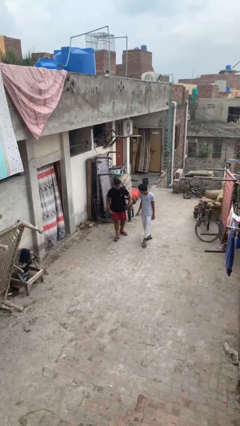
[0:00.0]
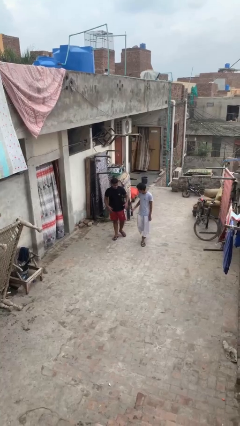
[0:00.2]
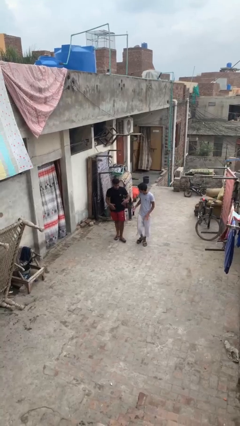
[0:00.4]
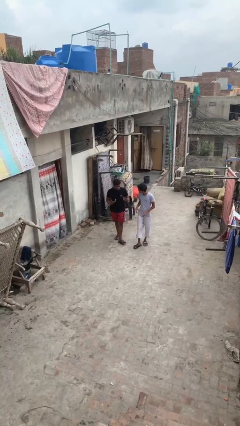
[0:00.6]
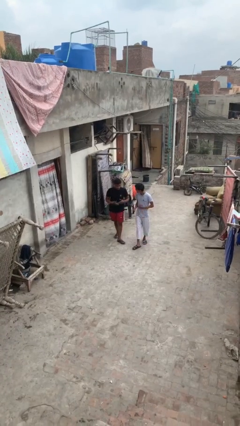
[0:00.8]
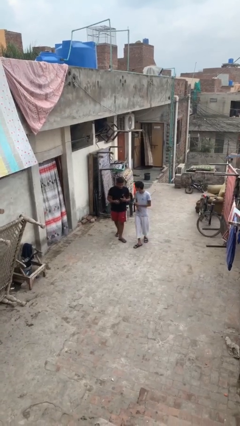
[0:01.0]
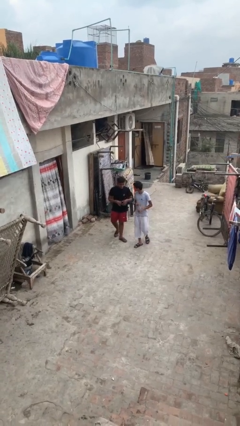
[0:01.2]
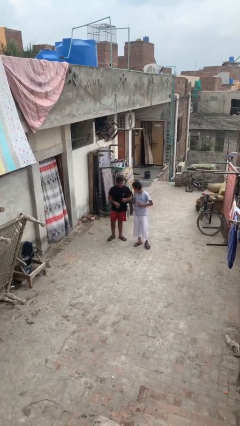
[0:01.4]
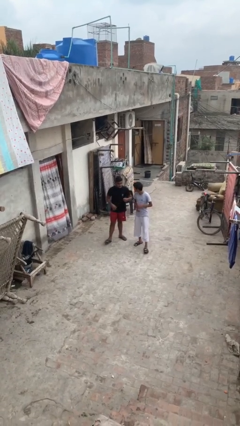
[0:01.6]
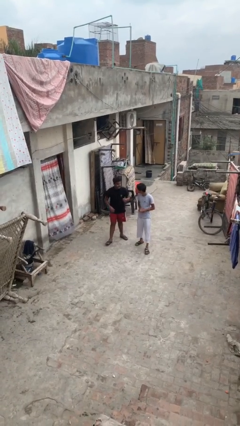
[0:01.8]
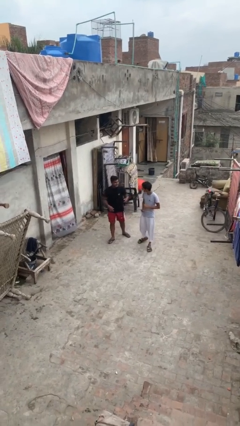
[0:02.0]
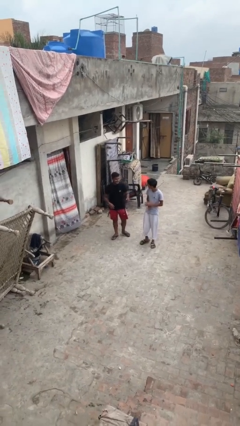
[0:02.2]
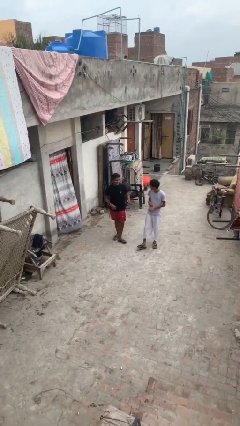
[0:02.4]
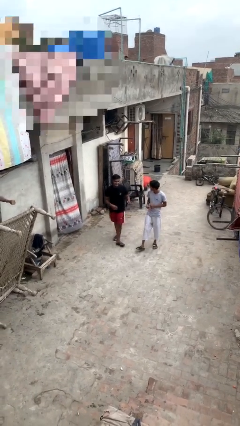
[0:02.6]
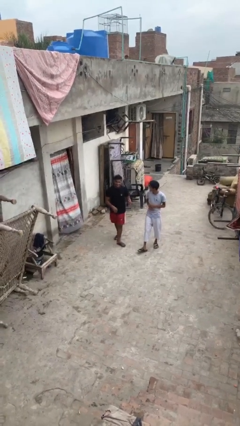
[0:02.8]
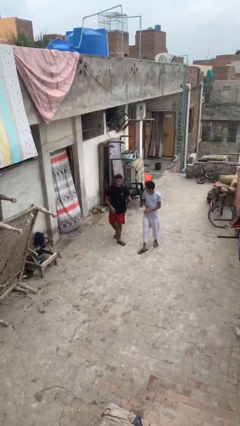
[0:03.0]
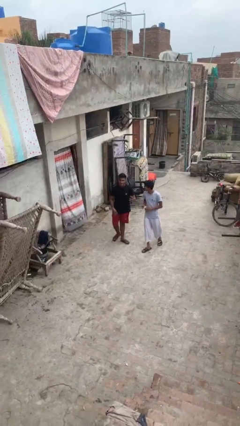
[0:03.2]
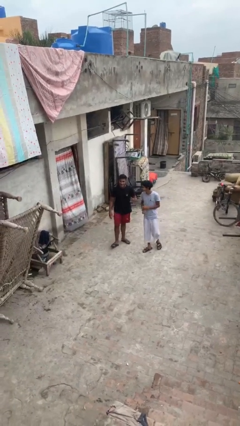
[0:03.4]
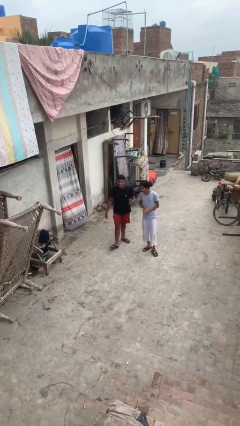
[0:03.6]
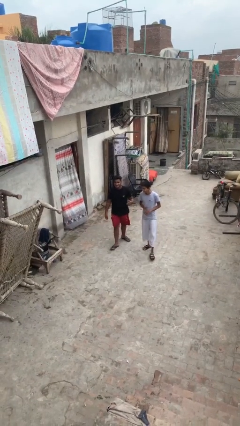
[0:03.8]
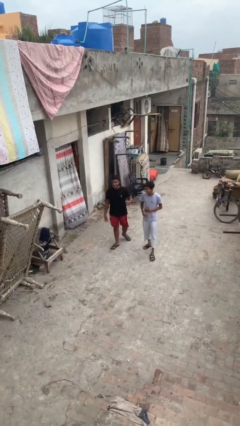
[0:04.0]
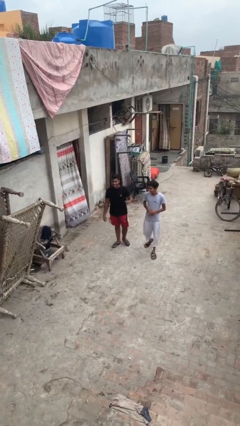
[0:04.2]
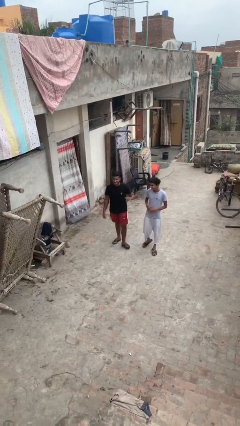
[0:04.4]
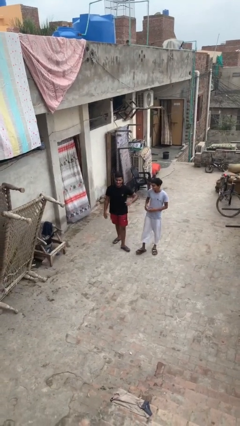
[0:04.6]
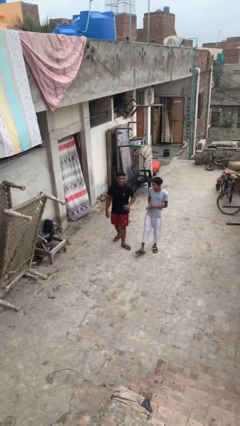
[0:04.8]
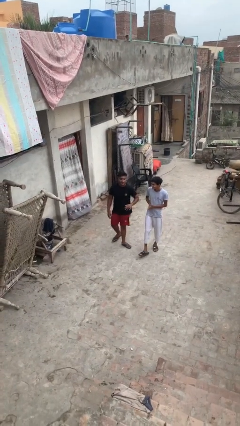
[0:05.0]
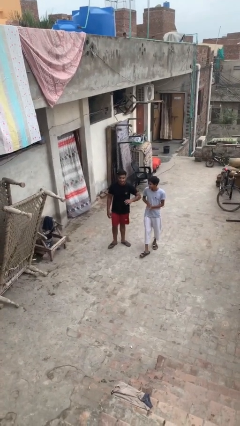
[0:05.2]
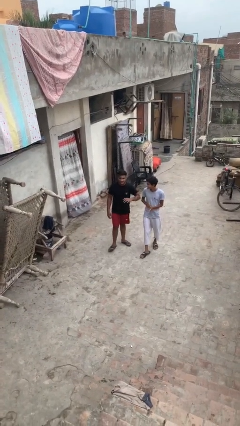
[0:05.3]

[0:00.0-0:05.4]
person talks to person

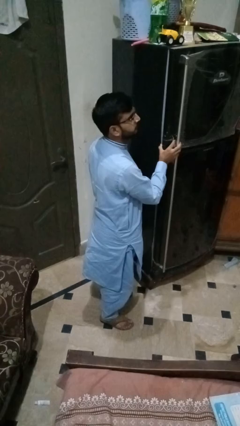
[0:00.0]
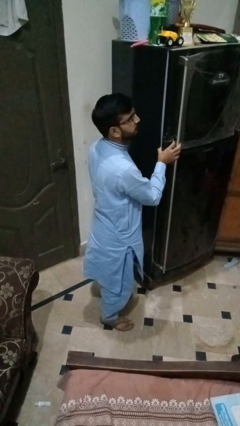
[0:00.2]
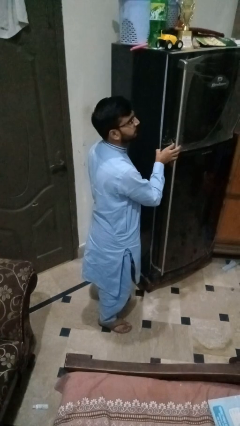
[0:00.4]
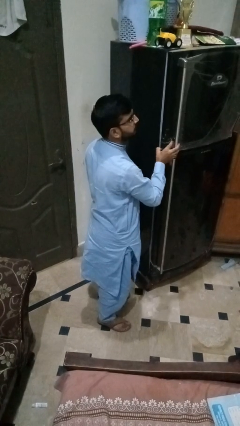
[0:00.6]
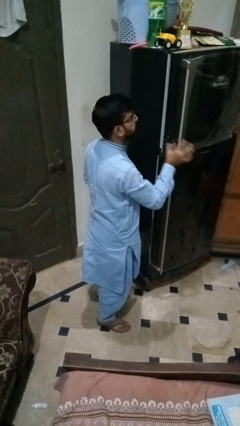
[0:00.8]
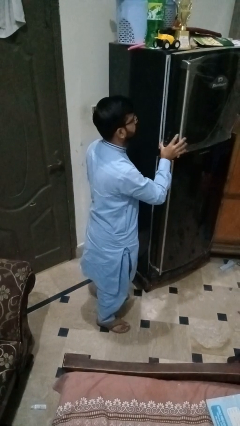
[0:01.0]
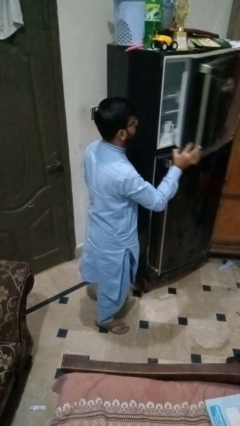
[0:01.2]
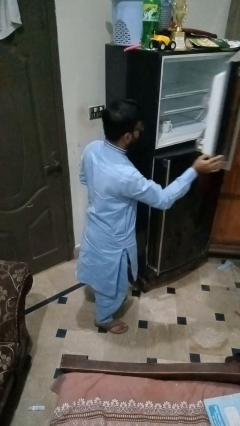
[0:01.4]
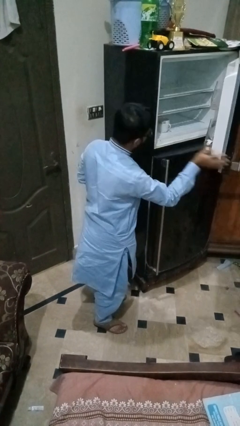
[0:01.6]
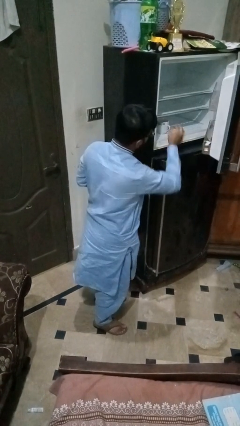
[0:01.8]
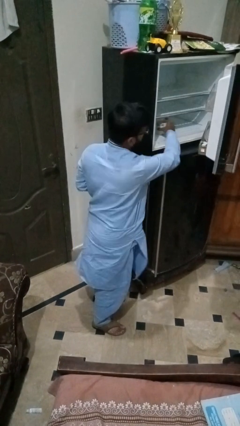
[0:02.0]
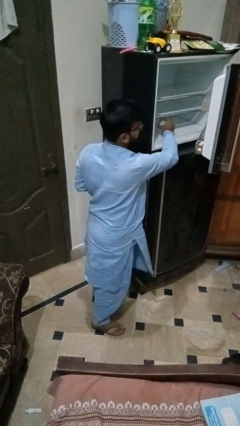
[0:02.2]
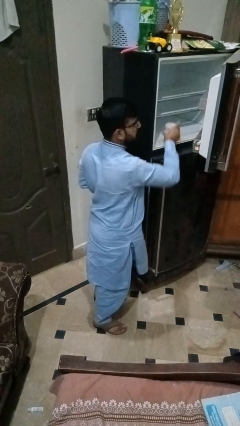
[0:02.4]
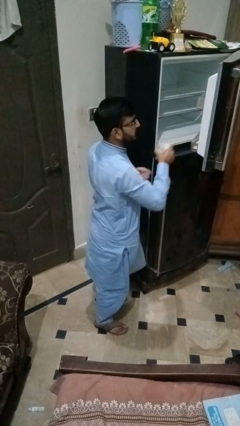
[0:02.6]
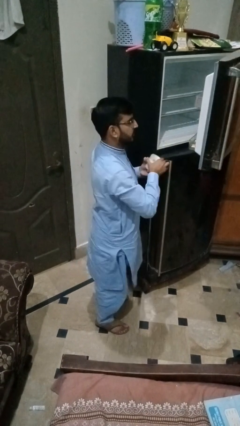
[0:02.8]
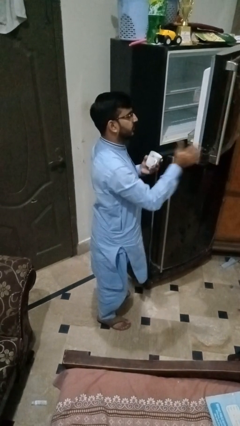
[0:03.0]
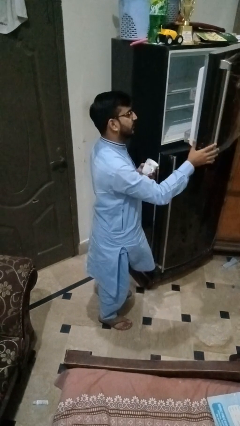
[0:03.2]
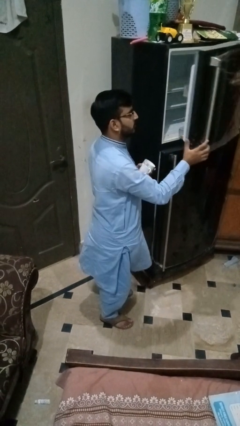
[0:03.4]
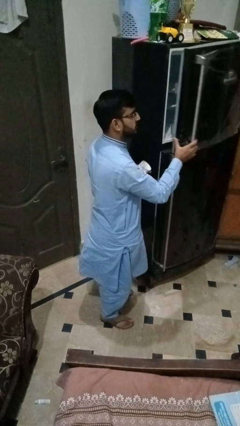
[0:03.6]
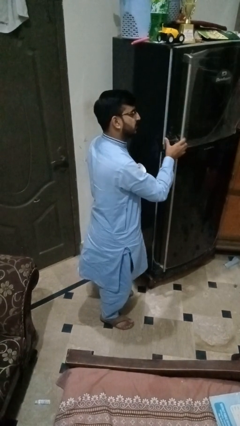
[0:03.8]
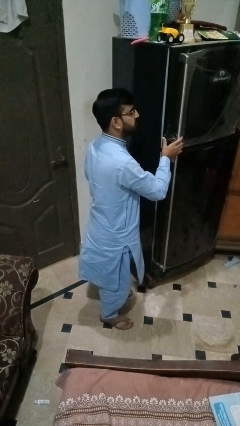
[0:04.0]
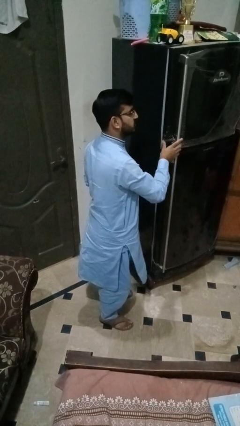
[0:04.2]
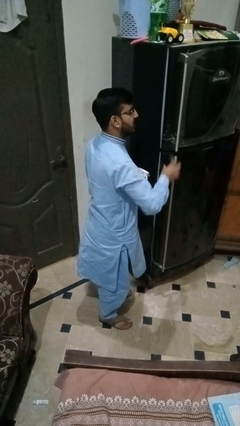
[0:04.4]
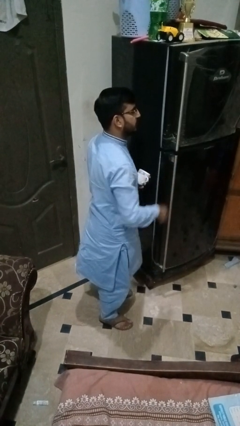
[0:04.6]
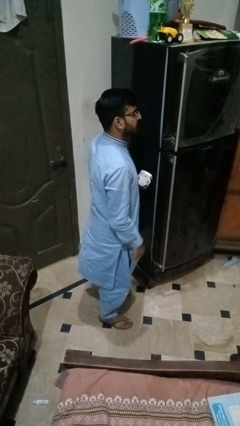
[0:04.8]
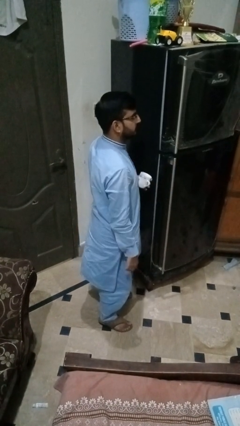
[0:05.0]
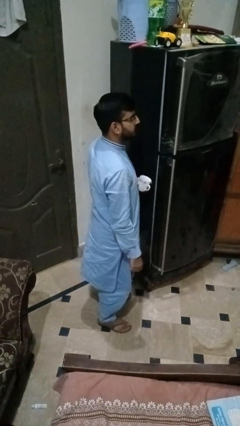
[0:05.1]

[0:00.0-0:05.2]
person takes object from refrigerator

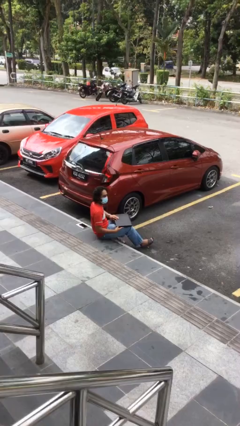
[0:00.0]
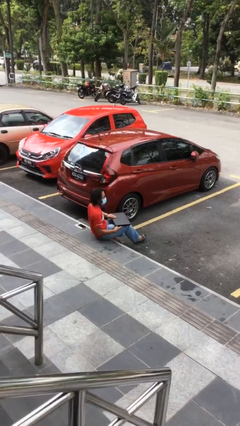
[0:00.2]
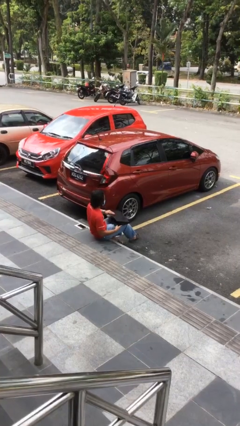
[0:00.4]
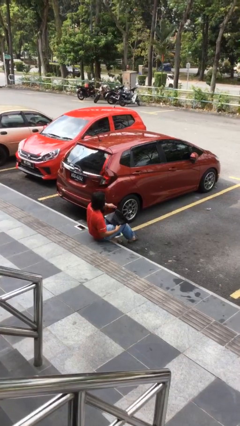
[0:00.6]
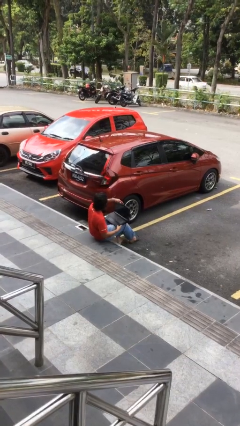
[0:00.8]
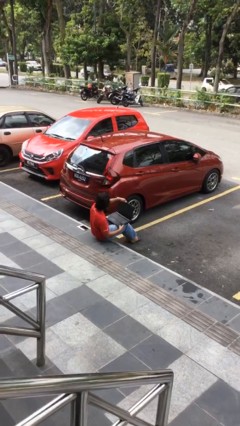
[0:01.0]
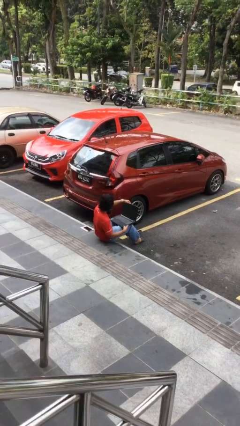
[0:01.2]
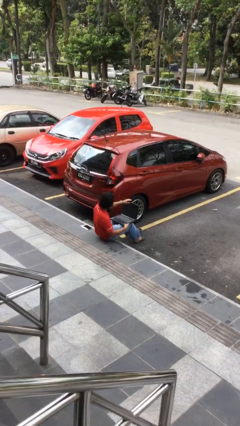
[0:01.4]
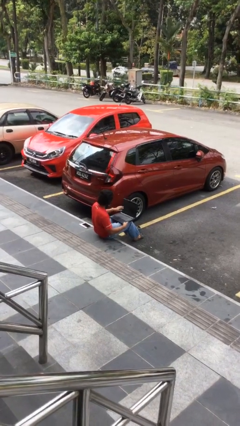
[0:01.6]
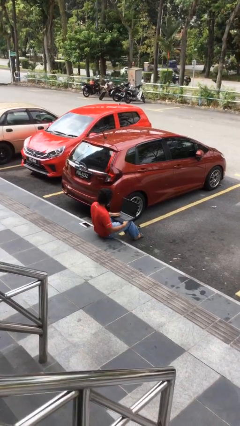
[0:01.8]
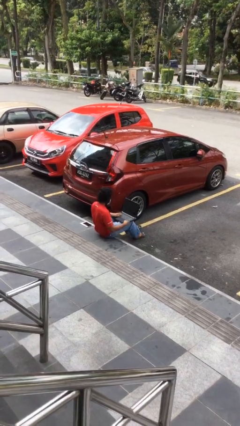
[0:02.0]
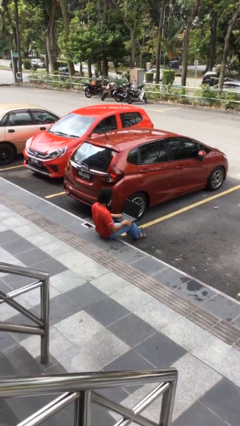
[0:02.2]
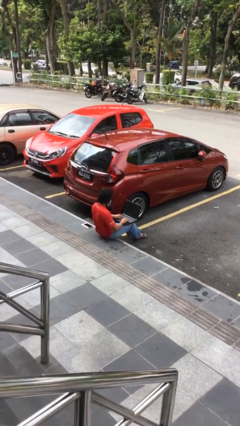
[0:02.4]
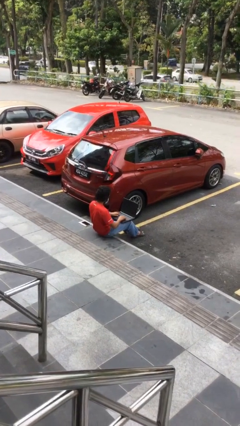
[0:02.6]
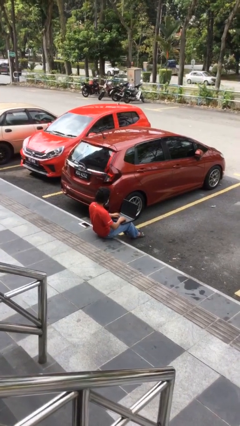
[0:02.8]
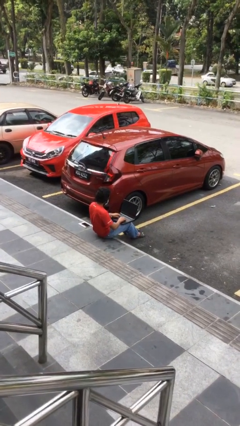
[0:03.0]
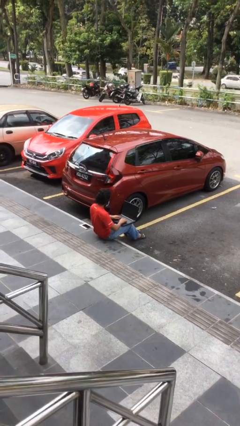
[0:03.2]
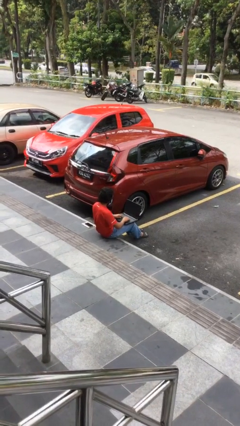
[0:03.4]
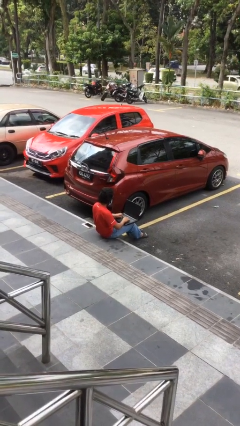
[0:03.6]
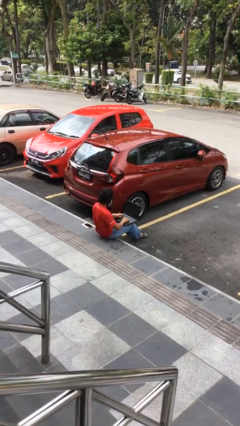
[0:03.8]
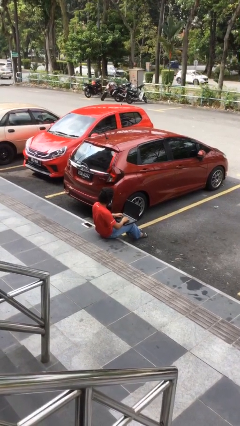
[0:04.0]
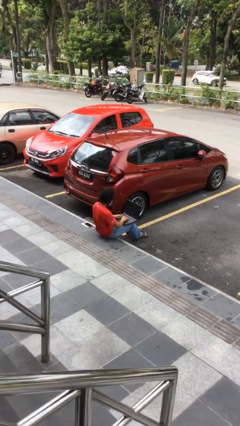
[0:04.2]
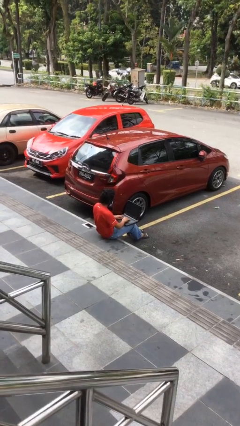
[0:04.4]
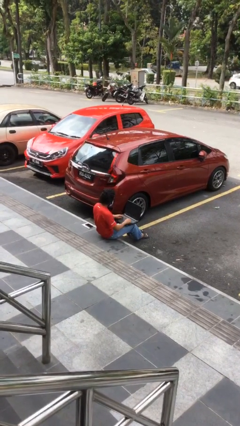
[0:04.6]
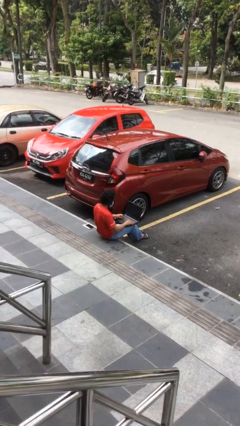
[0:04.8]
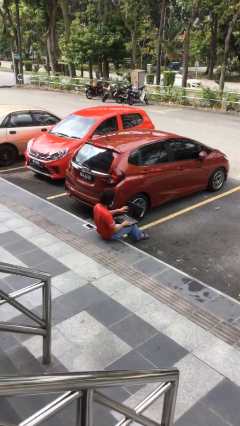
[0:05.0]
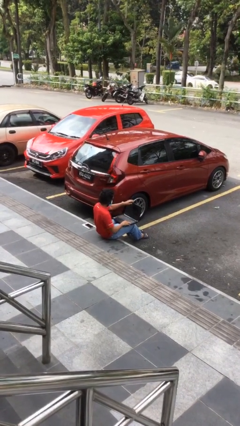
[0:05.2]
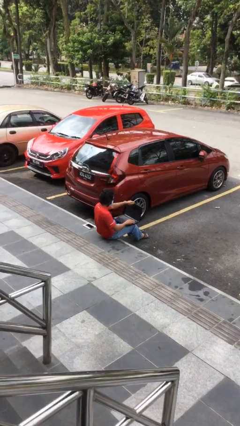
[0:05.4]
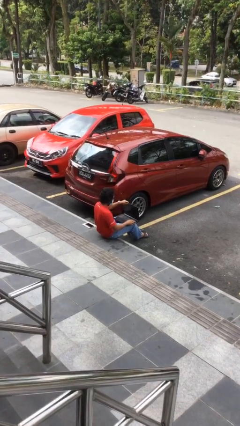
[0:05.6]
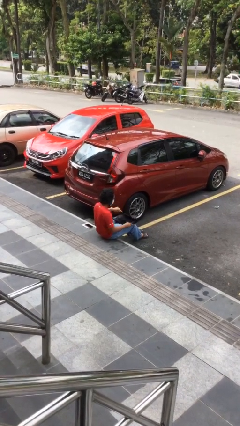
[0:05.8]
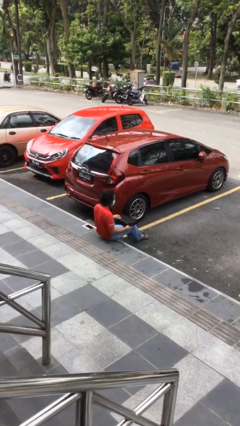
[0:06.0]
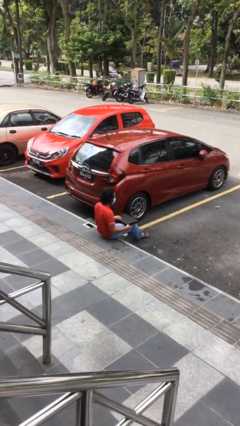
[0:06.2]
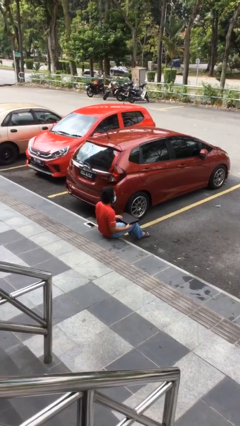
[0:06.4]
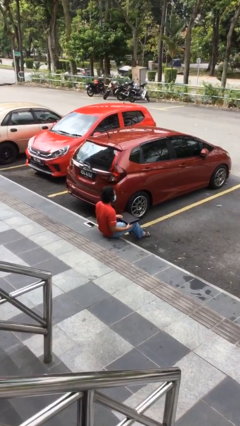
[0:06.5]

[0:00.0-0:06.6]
person interacts with laptop

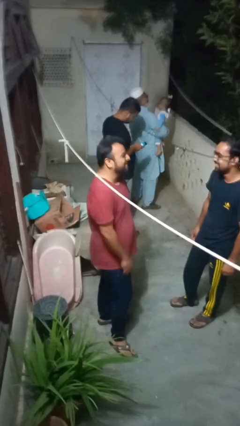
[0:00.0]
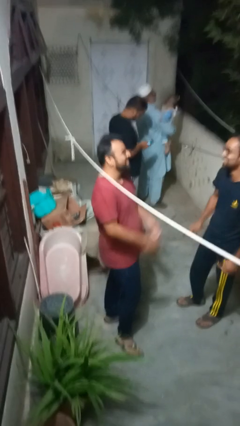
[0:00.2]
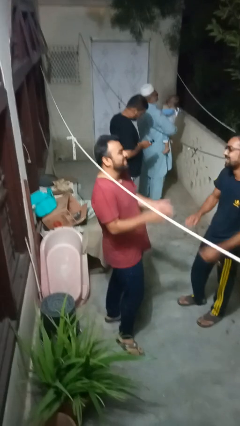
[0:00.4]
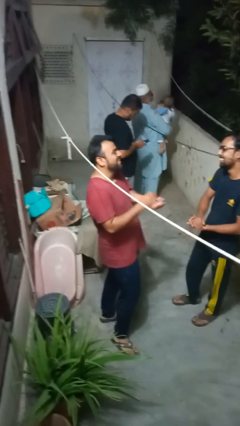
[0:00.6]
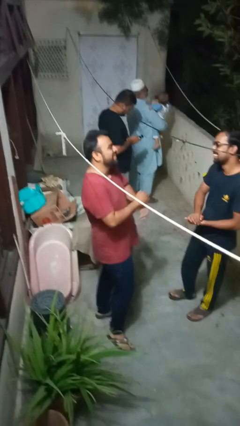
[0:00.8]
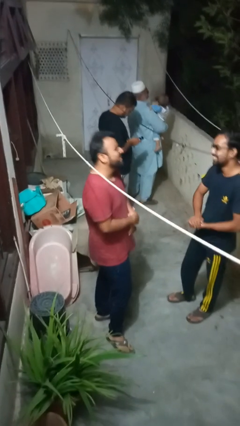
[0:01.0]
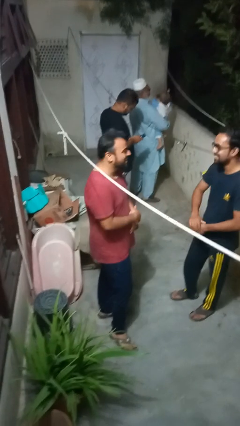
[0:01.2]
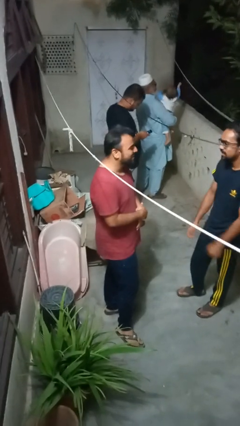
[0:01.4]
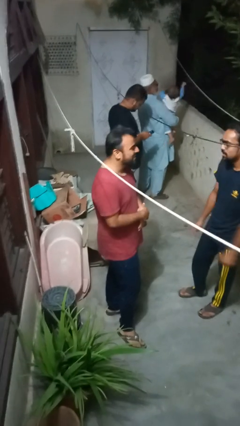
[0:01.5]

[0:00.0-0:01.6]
person laughs with person
